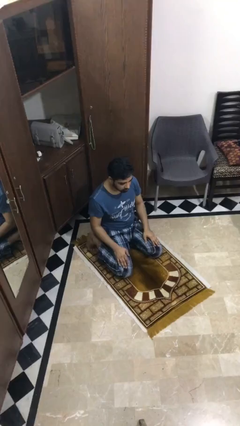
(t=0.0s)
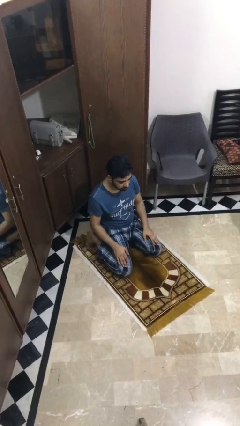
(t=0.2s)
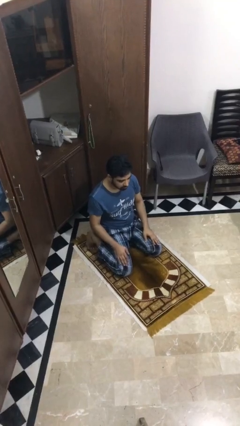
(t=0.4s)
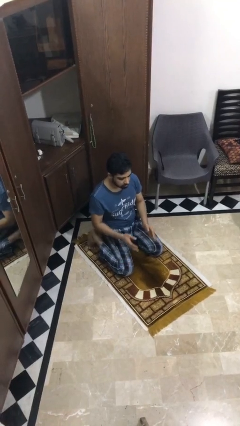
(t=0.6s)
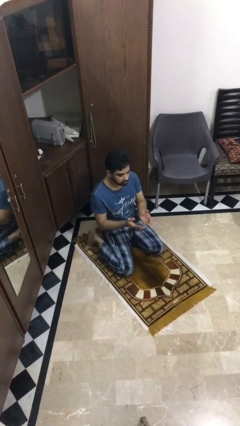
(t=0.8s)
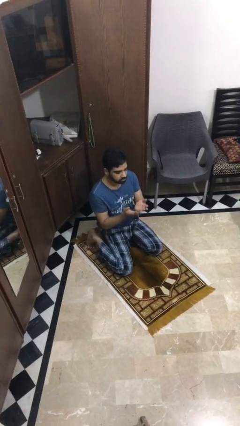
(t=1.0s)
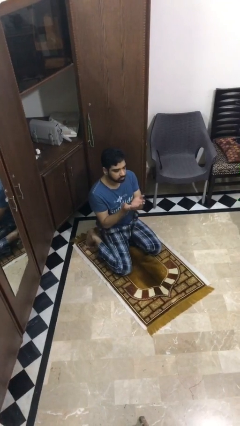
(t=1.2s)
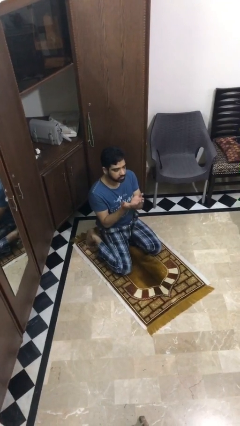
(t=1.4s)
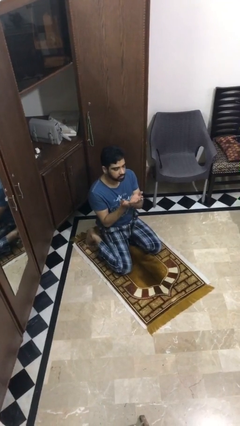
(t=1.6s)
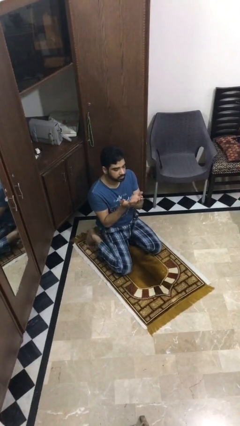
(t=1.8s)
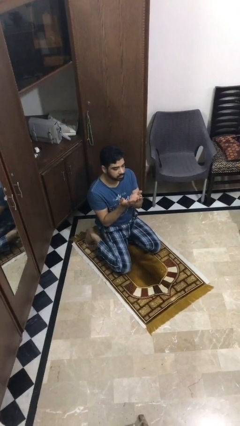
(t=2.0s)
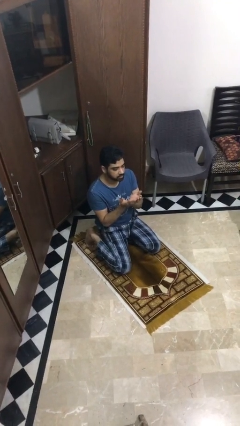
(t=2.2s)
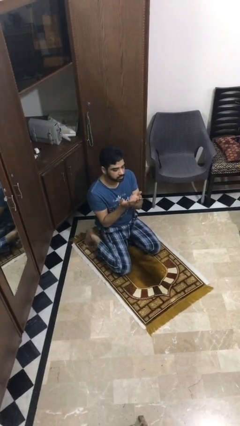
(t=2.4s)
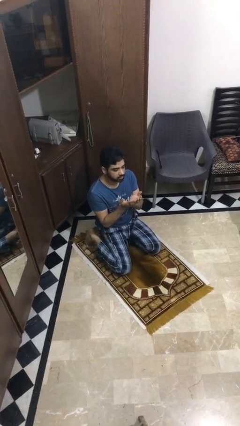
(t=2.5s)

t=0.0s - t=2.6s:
person prays

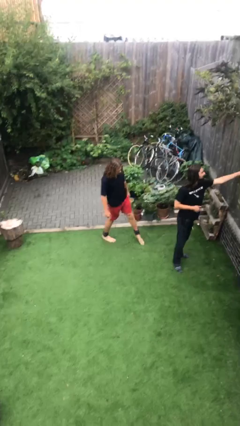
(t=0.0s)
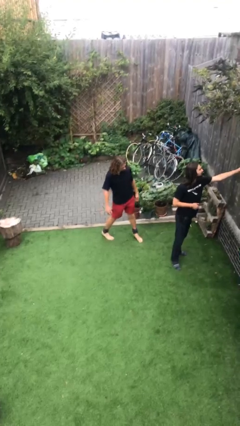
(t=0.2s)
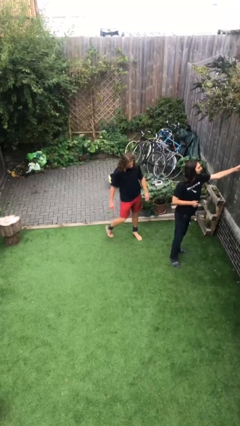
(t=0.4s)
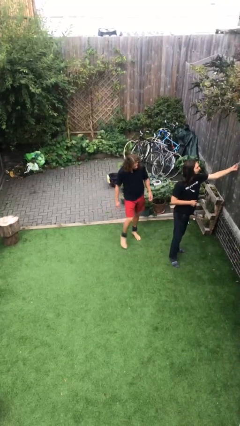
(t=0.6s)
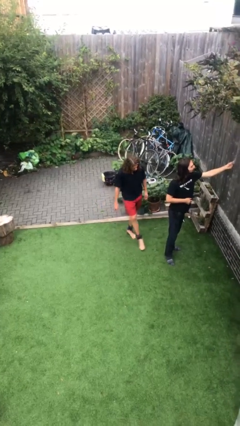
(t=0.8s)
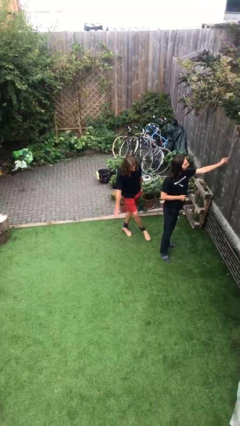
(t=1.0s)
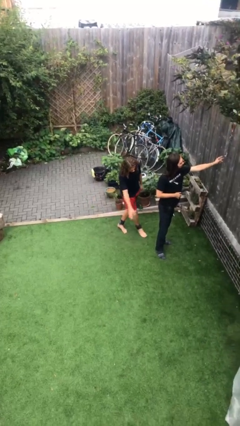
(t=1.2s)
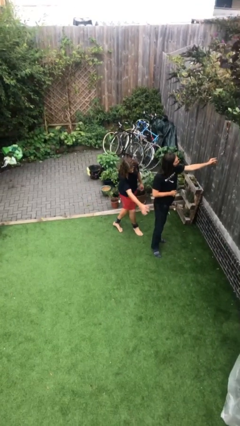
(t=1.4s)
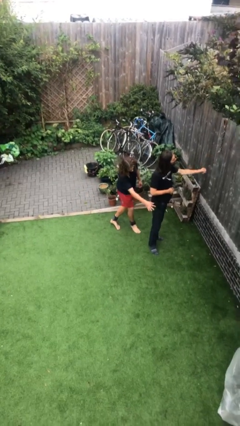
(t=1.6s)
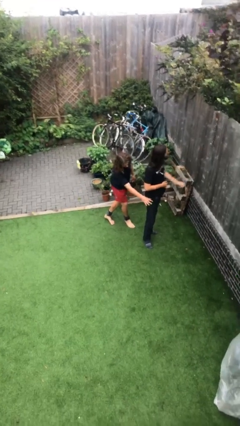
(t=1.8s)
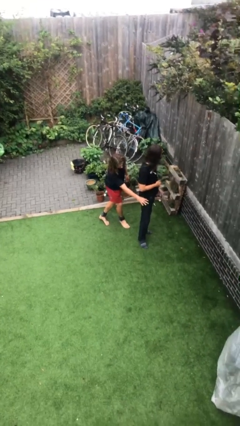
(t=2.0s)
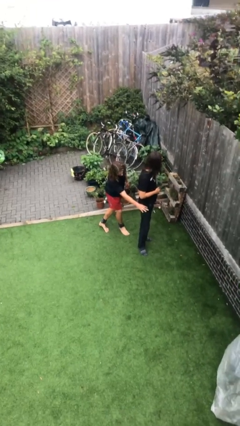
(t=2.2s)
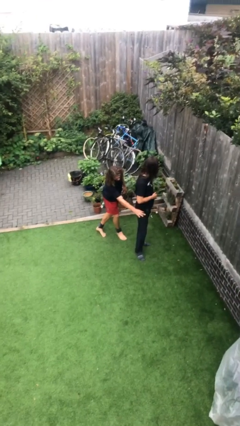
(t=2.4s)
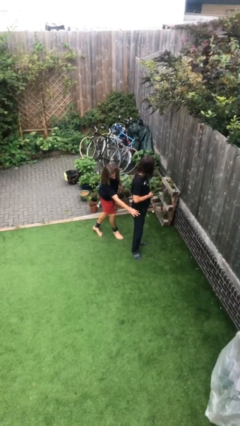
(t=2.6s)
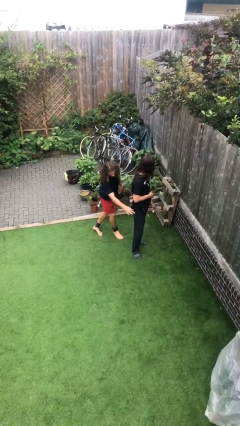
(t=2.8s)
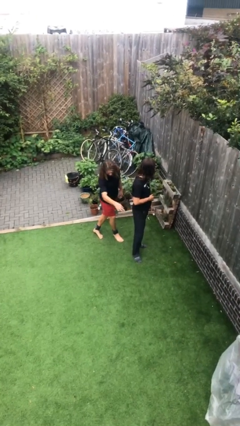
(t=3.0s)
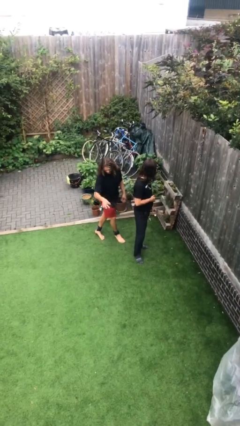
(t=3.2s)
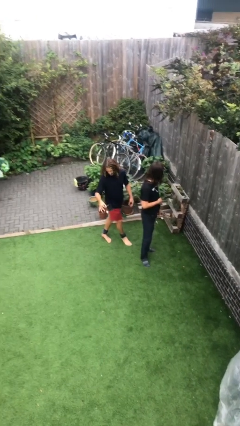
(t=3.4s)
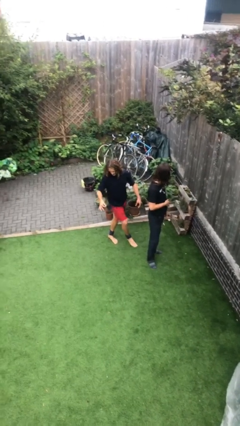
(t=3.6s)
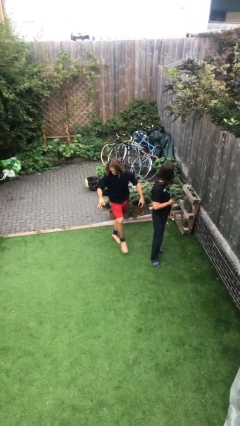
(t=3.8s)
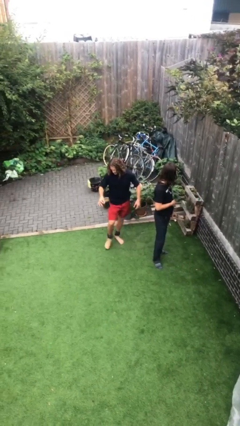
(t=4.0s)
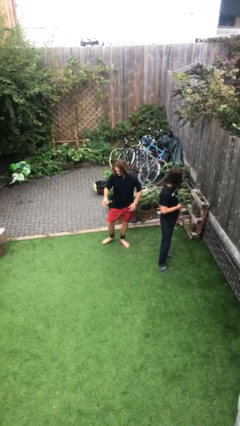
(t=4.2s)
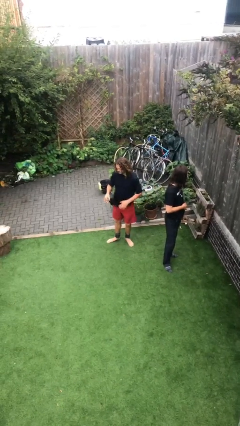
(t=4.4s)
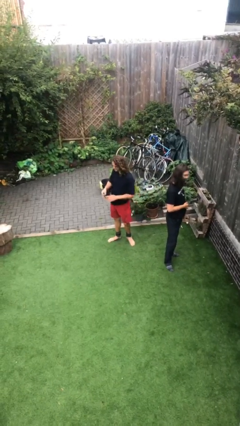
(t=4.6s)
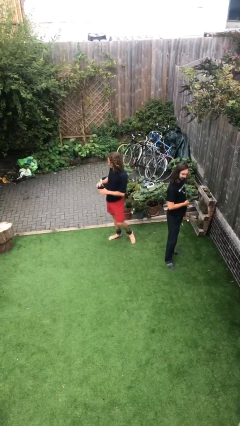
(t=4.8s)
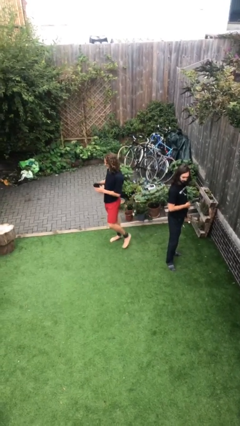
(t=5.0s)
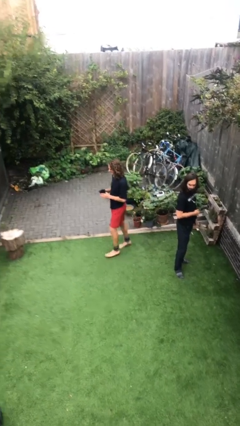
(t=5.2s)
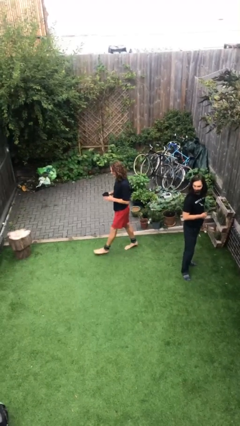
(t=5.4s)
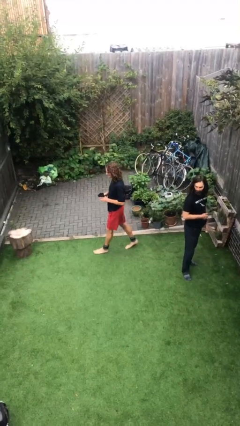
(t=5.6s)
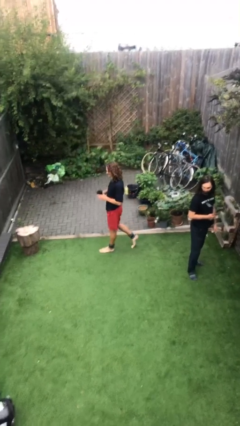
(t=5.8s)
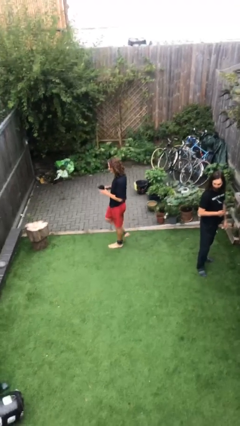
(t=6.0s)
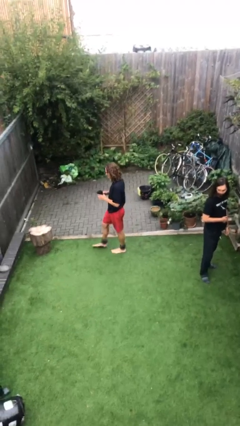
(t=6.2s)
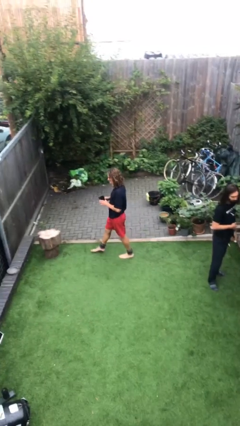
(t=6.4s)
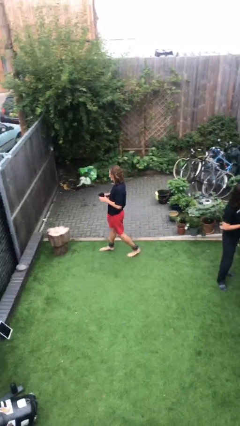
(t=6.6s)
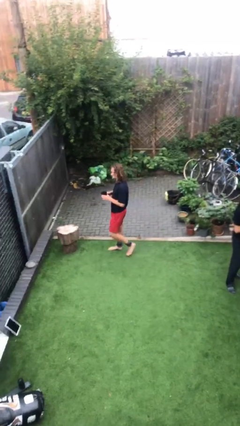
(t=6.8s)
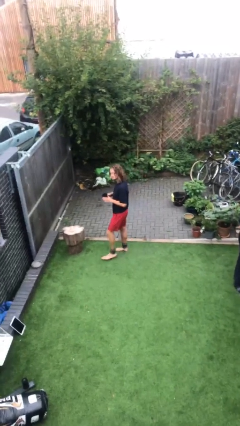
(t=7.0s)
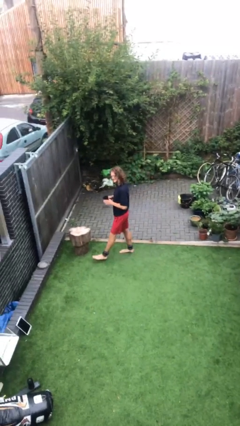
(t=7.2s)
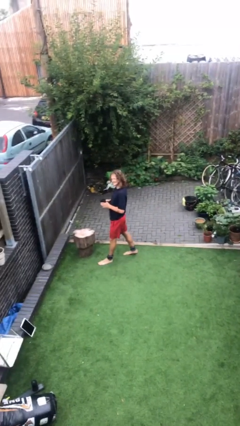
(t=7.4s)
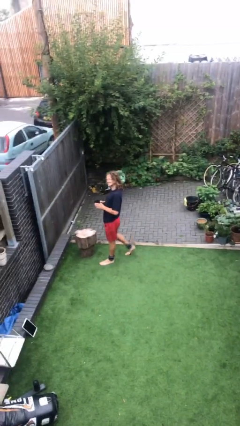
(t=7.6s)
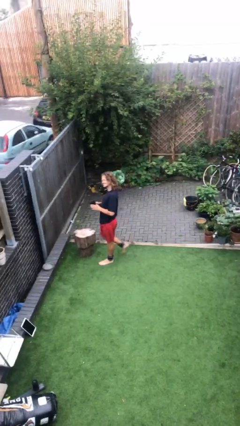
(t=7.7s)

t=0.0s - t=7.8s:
person steals object from person

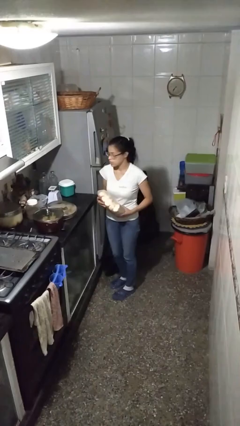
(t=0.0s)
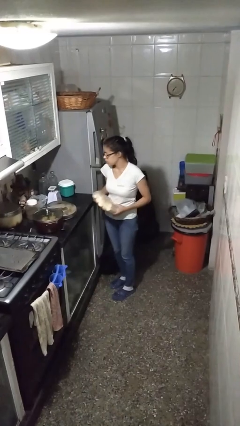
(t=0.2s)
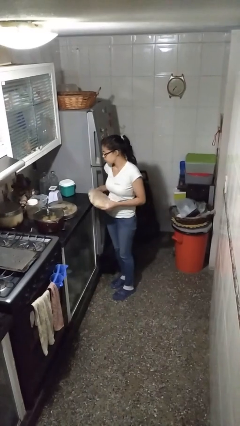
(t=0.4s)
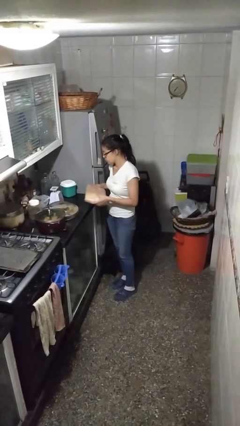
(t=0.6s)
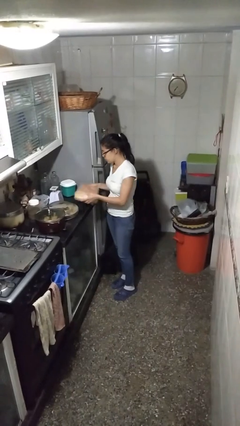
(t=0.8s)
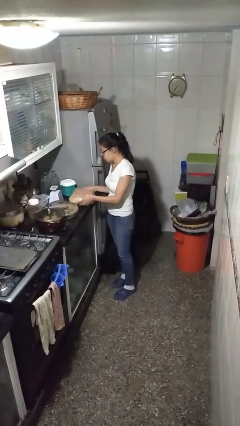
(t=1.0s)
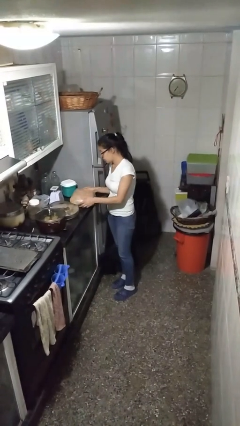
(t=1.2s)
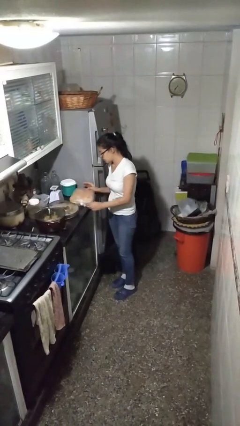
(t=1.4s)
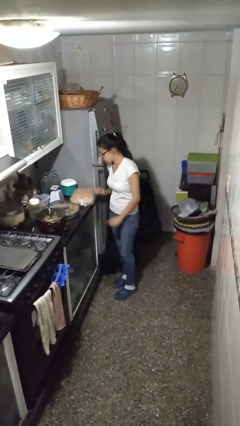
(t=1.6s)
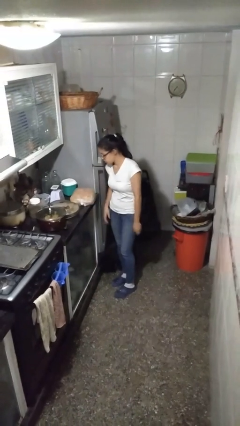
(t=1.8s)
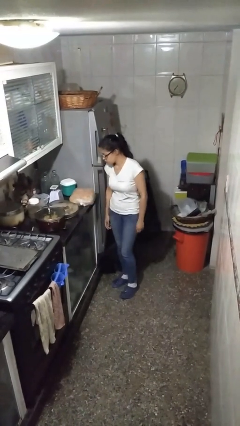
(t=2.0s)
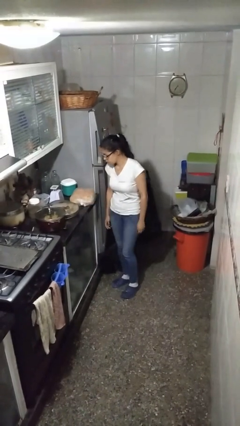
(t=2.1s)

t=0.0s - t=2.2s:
person puts down object on countertop

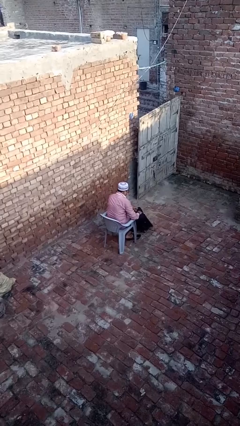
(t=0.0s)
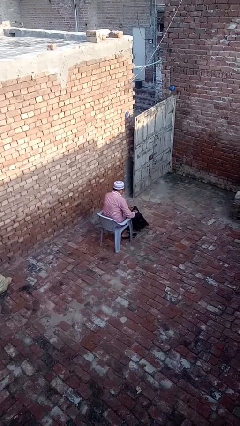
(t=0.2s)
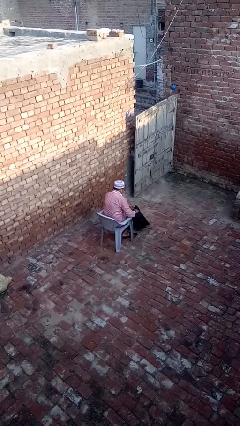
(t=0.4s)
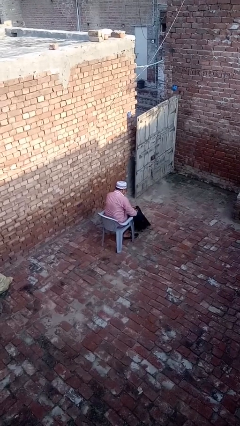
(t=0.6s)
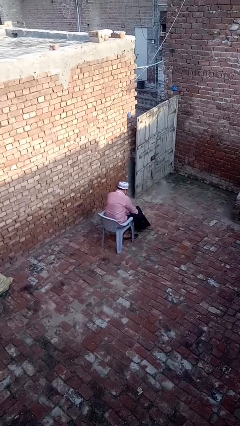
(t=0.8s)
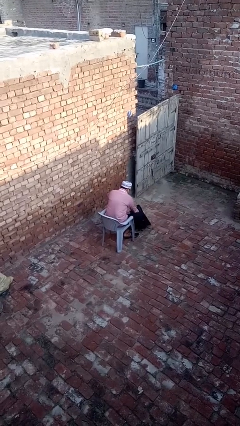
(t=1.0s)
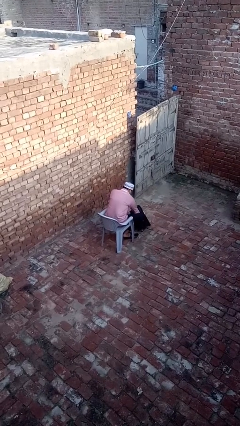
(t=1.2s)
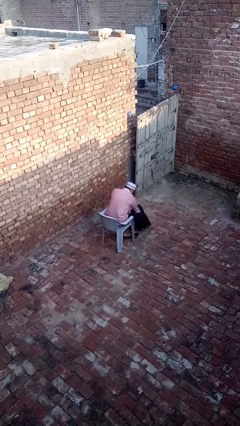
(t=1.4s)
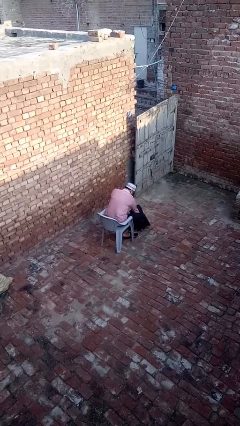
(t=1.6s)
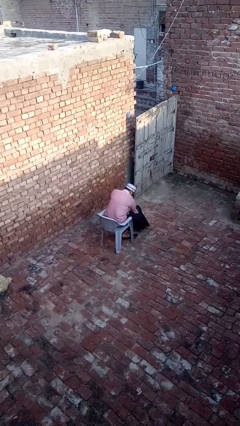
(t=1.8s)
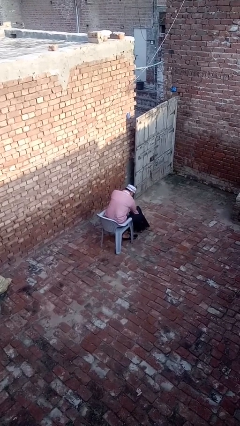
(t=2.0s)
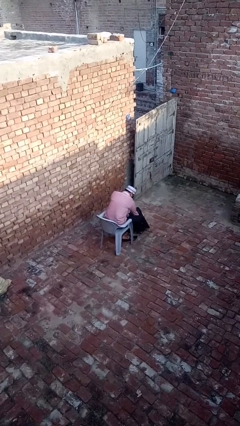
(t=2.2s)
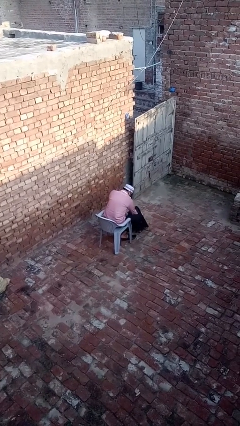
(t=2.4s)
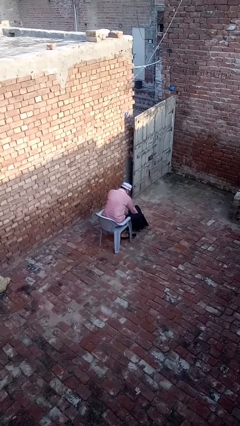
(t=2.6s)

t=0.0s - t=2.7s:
person searches in backpack

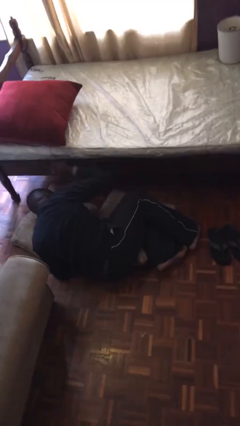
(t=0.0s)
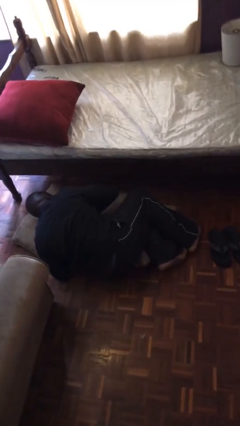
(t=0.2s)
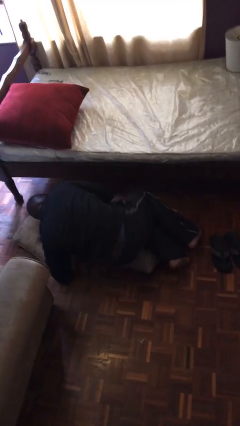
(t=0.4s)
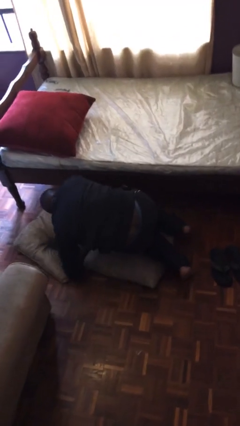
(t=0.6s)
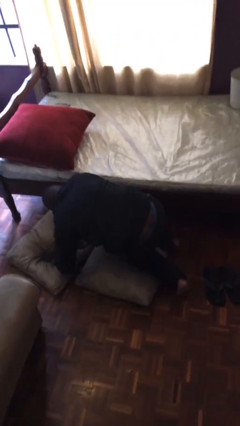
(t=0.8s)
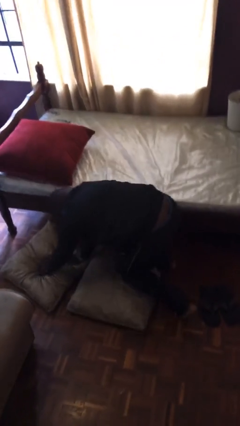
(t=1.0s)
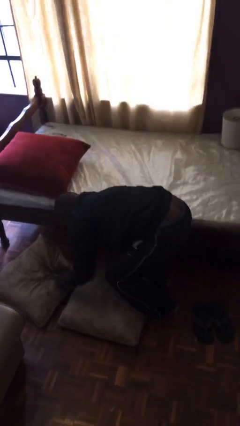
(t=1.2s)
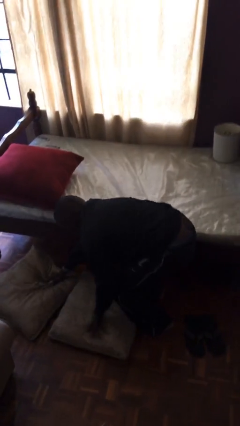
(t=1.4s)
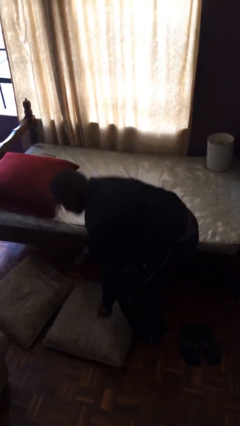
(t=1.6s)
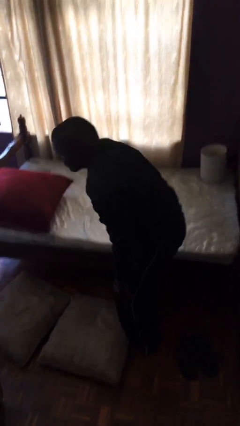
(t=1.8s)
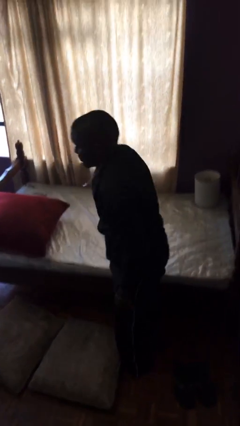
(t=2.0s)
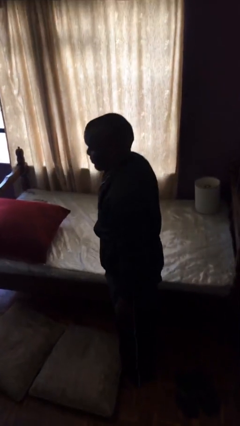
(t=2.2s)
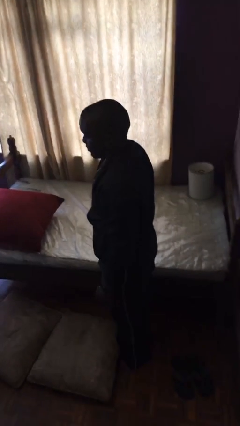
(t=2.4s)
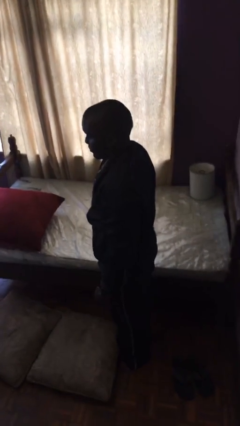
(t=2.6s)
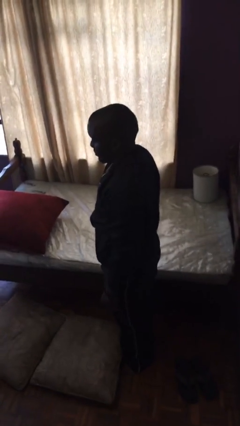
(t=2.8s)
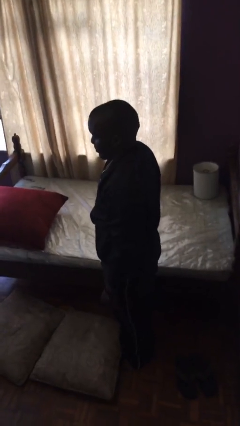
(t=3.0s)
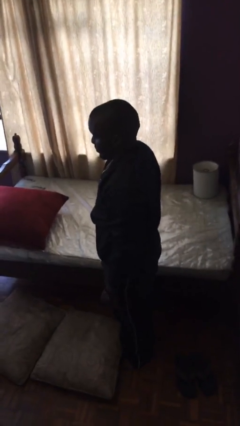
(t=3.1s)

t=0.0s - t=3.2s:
person stands up from floor
